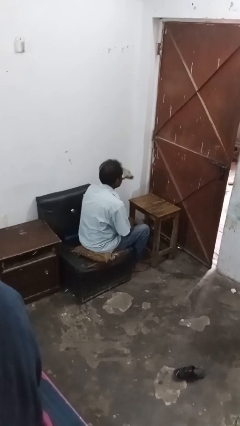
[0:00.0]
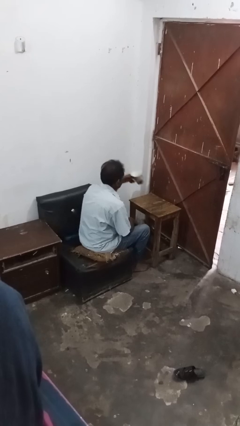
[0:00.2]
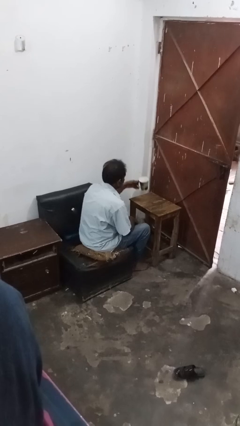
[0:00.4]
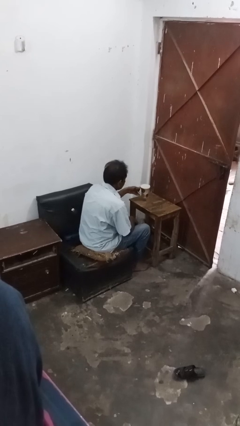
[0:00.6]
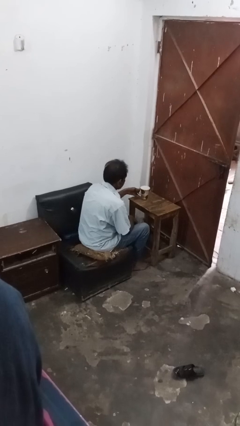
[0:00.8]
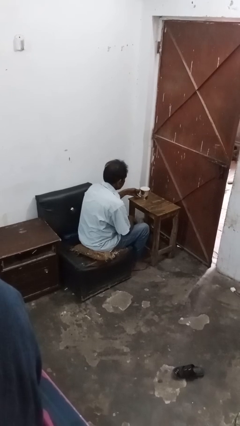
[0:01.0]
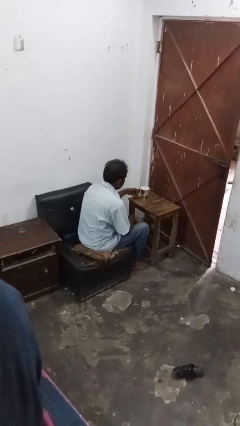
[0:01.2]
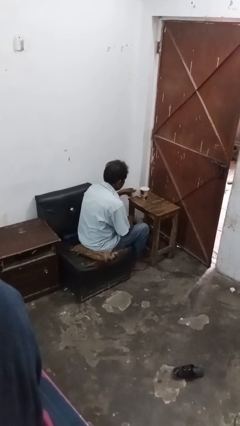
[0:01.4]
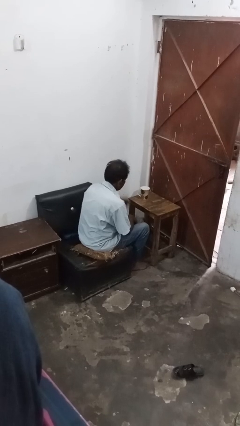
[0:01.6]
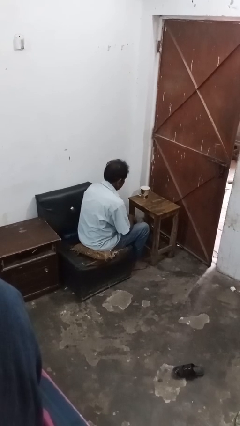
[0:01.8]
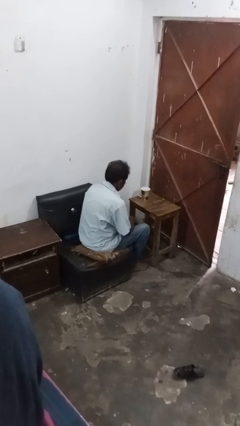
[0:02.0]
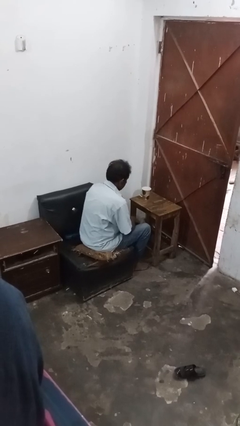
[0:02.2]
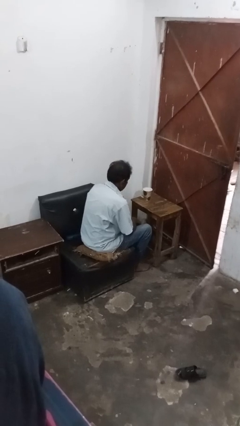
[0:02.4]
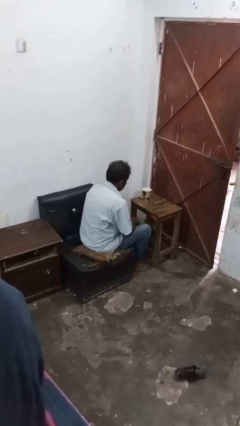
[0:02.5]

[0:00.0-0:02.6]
person puts down object on table

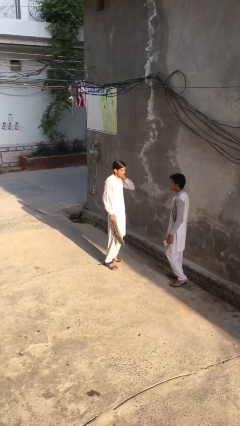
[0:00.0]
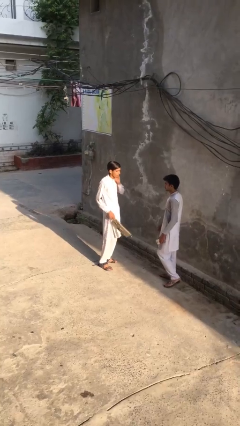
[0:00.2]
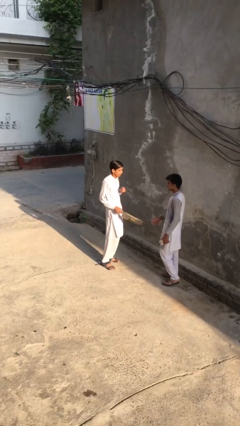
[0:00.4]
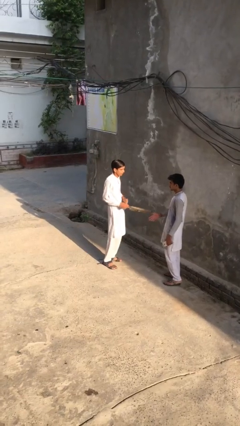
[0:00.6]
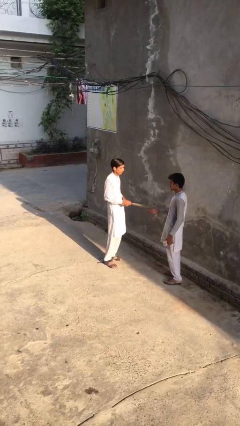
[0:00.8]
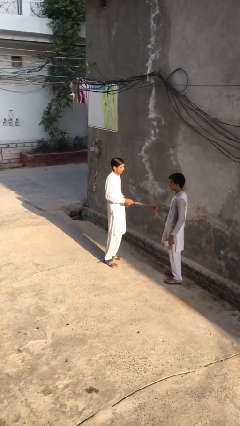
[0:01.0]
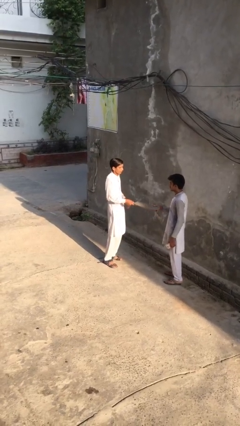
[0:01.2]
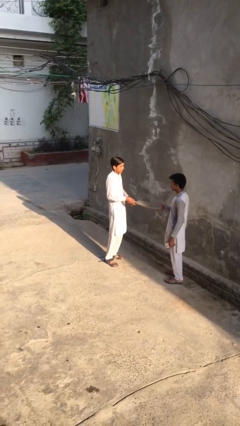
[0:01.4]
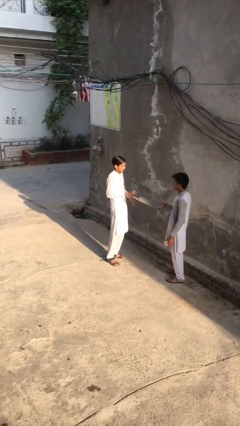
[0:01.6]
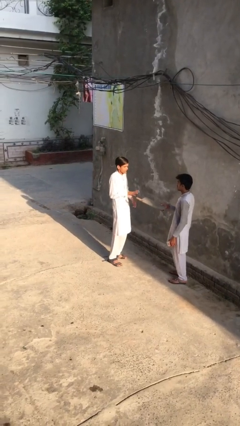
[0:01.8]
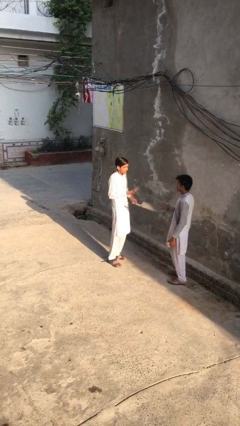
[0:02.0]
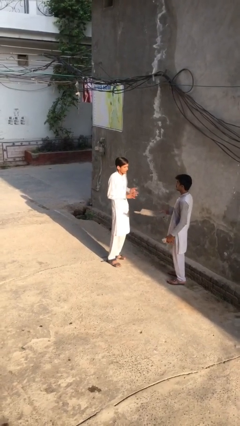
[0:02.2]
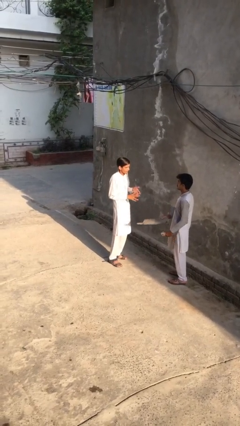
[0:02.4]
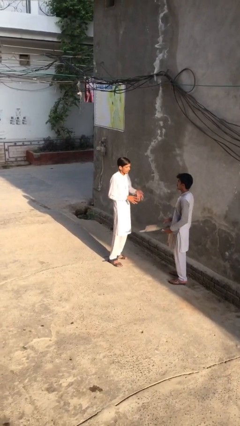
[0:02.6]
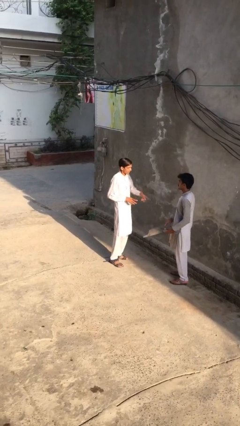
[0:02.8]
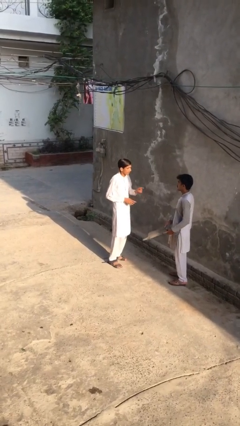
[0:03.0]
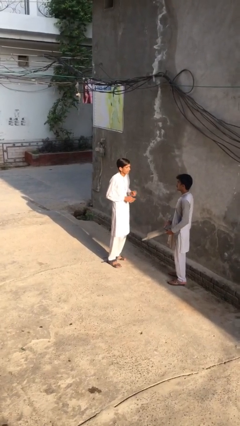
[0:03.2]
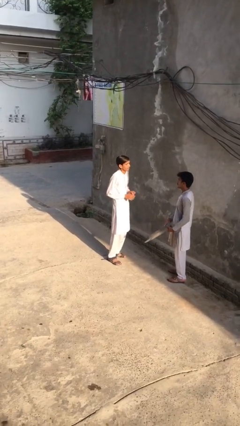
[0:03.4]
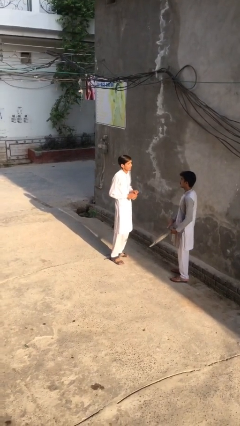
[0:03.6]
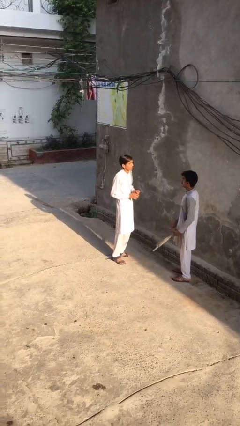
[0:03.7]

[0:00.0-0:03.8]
person transfers object to person

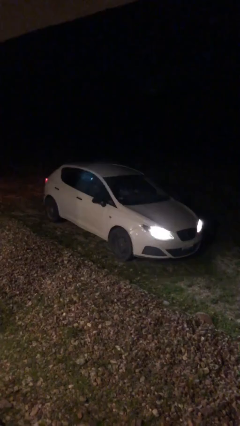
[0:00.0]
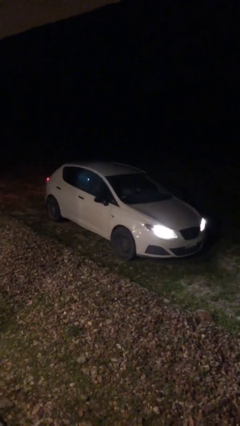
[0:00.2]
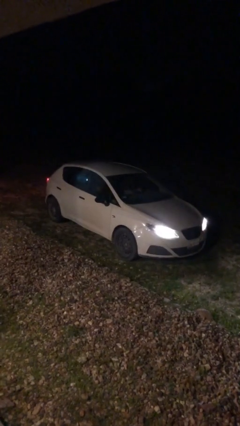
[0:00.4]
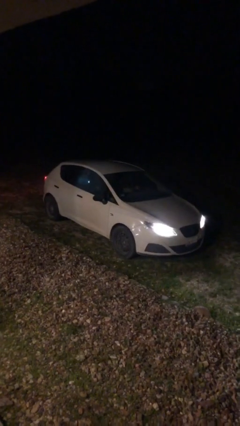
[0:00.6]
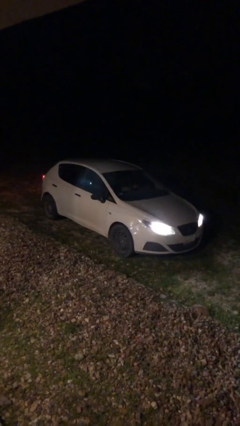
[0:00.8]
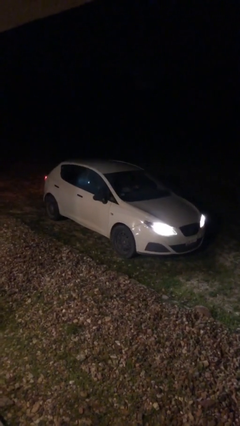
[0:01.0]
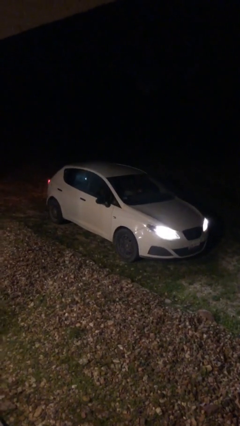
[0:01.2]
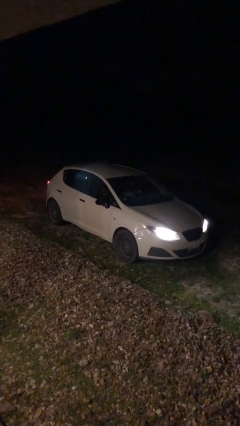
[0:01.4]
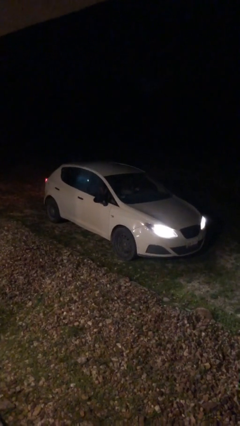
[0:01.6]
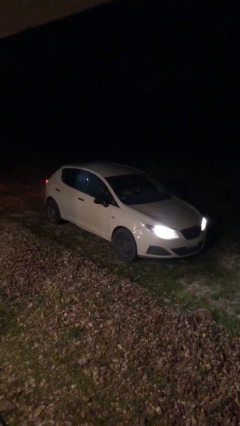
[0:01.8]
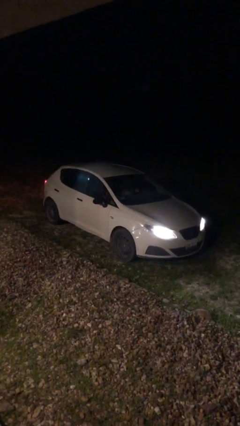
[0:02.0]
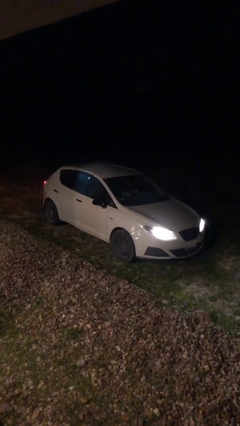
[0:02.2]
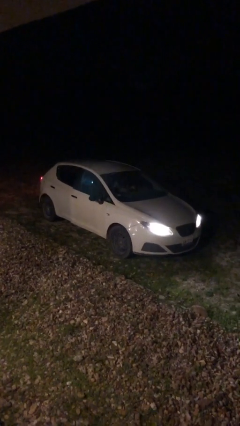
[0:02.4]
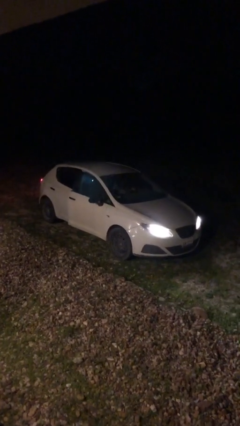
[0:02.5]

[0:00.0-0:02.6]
car drops off person

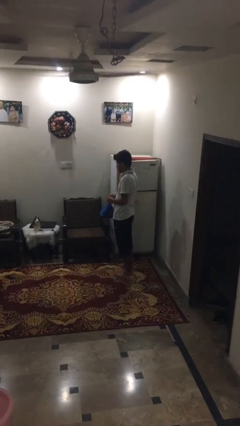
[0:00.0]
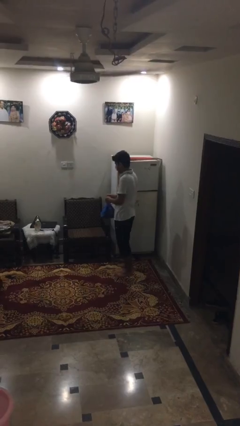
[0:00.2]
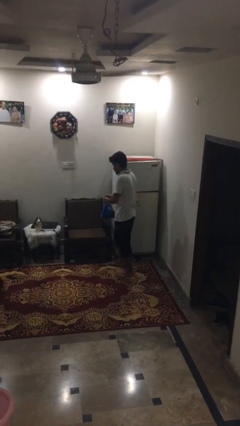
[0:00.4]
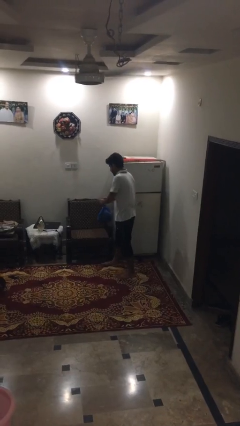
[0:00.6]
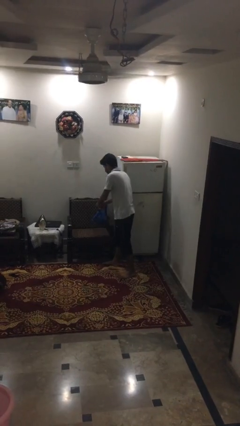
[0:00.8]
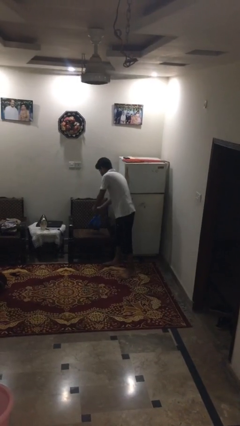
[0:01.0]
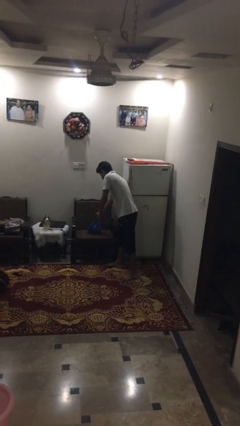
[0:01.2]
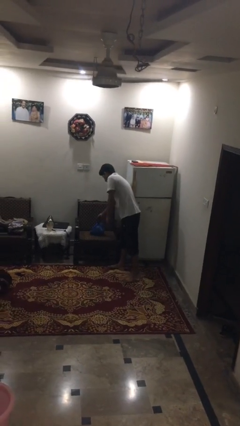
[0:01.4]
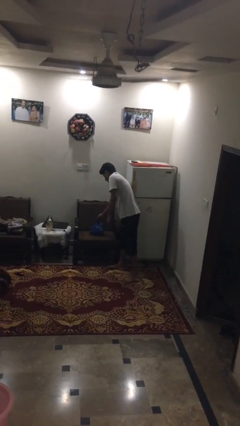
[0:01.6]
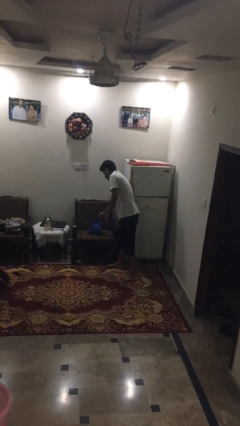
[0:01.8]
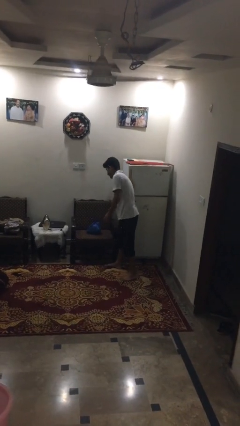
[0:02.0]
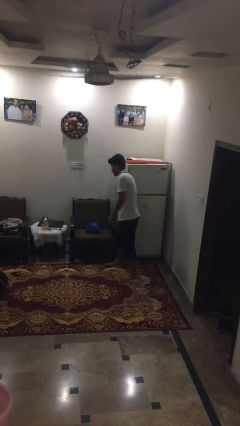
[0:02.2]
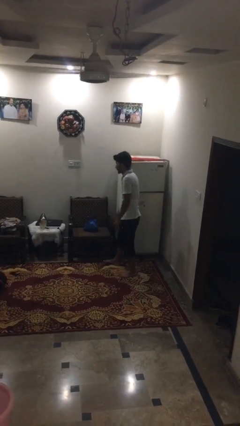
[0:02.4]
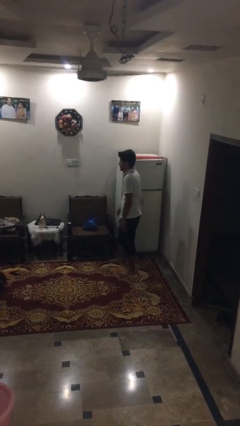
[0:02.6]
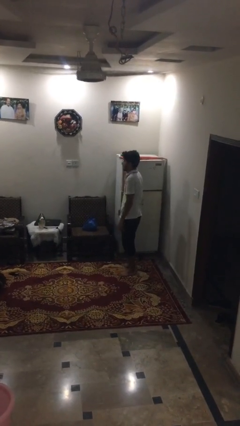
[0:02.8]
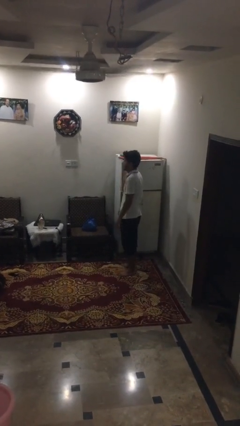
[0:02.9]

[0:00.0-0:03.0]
person puts down object on couch

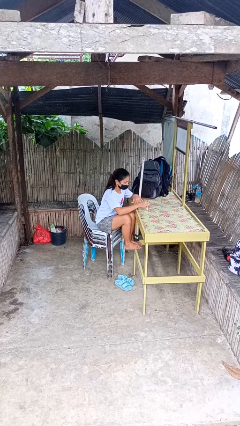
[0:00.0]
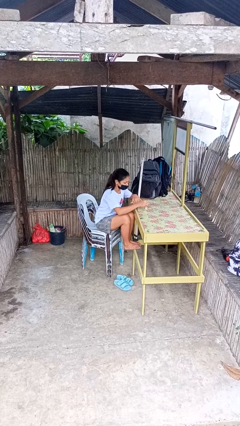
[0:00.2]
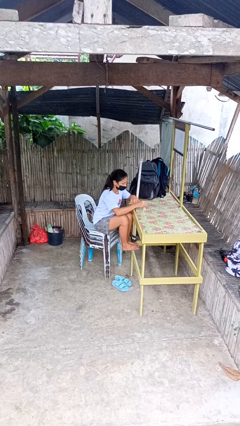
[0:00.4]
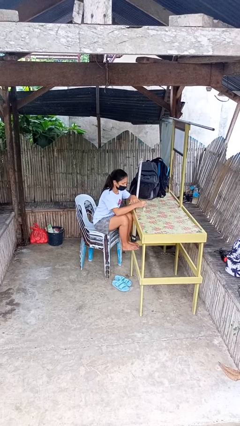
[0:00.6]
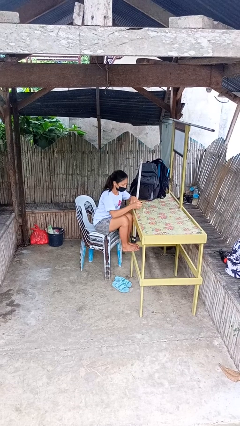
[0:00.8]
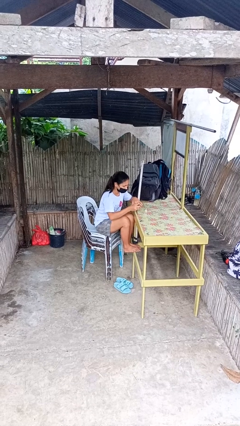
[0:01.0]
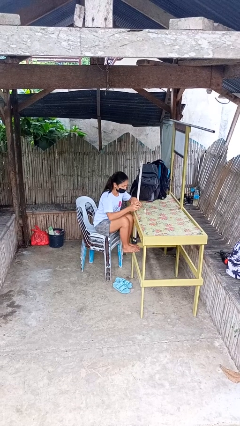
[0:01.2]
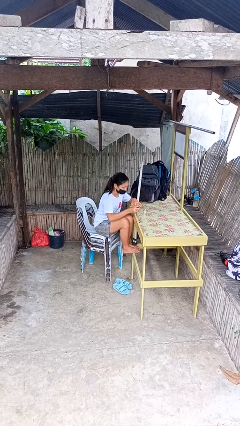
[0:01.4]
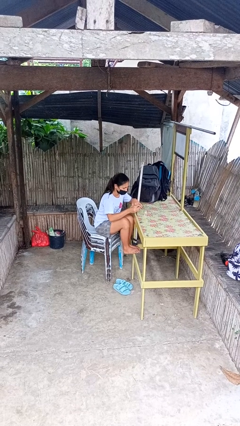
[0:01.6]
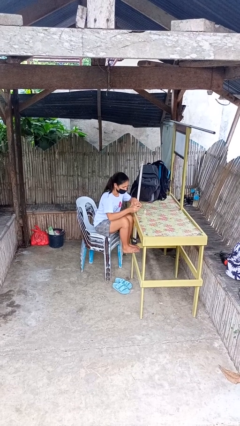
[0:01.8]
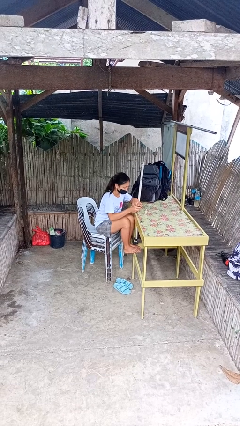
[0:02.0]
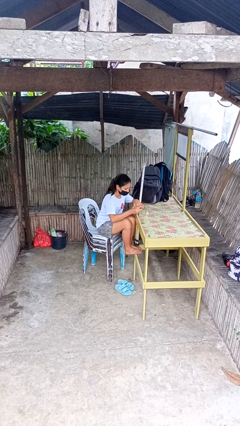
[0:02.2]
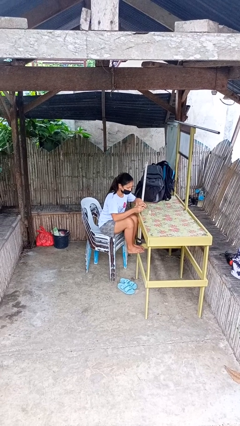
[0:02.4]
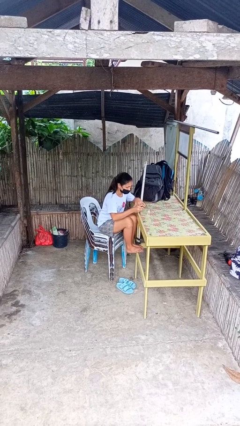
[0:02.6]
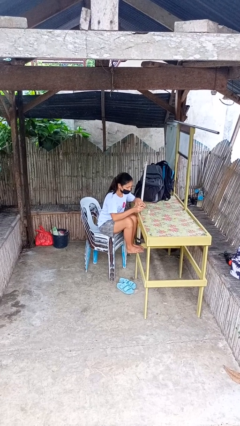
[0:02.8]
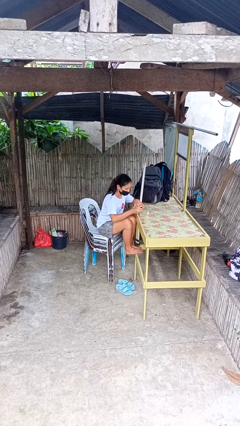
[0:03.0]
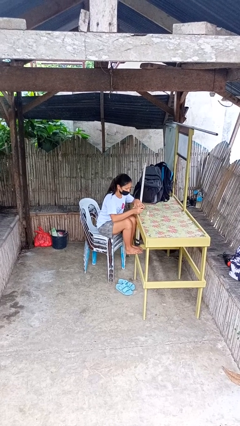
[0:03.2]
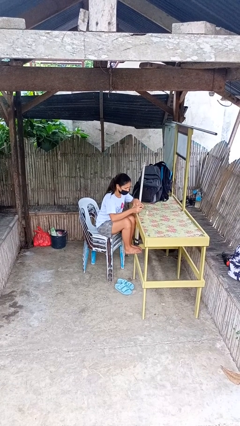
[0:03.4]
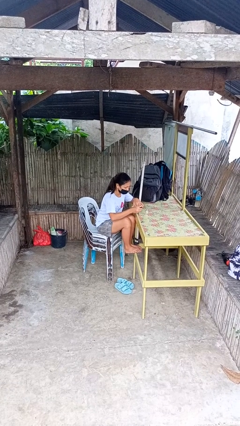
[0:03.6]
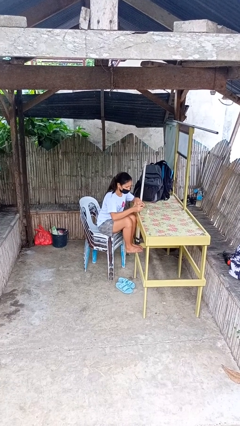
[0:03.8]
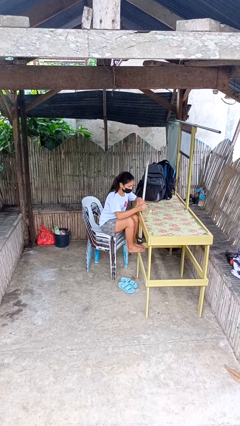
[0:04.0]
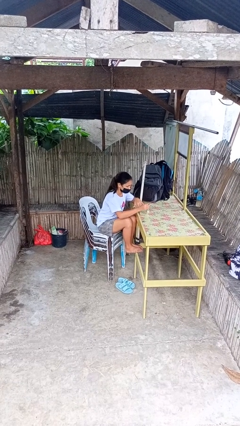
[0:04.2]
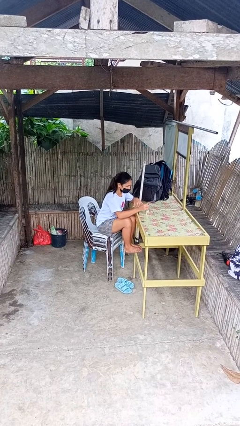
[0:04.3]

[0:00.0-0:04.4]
person paints fingernails

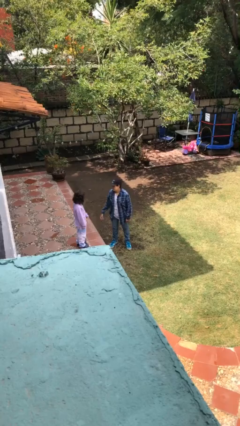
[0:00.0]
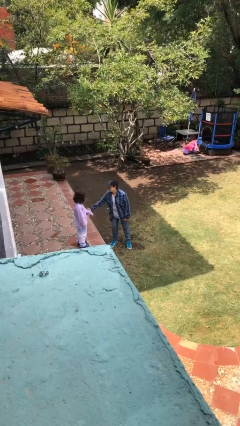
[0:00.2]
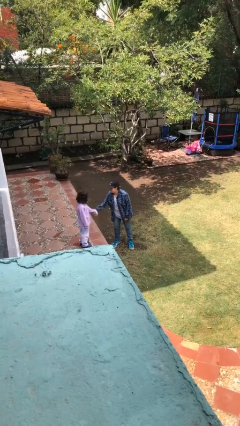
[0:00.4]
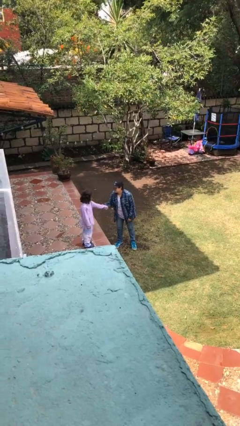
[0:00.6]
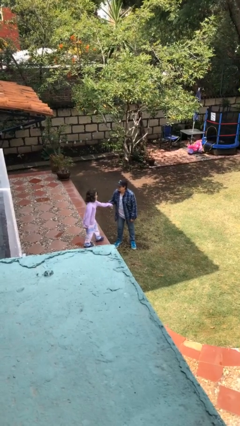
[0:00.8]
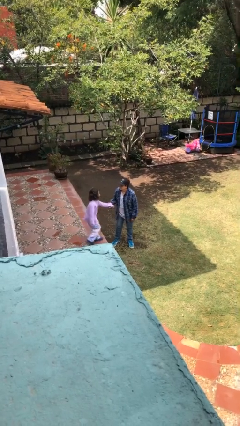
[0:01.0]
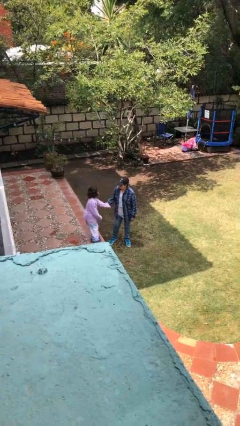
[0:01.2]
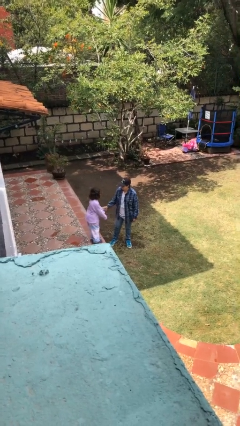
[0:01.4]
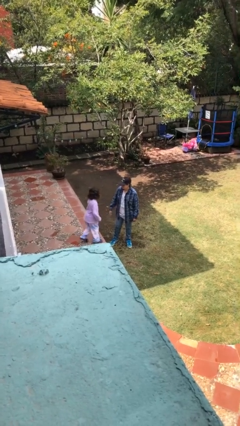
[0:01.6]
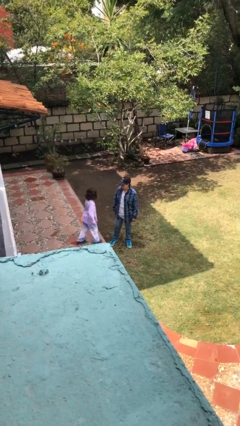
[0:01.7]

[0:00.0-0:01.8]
person grabs person by forearm
